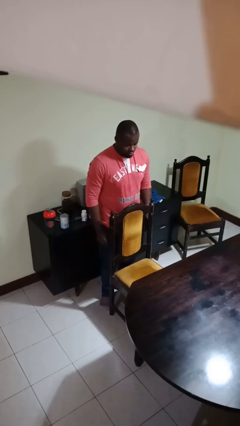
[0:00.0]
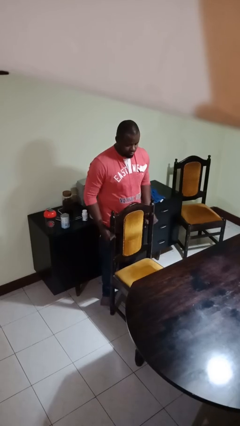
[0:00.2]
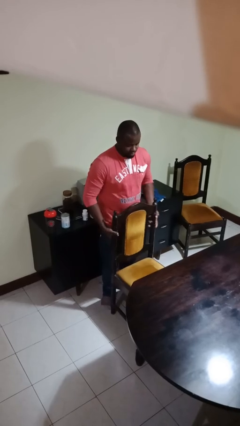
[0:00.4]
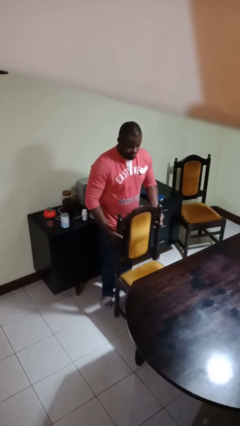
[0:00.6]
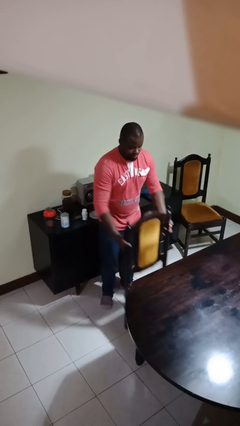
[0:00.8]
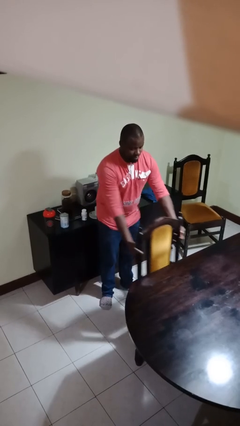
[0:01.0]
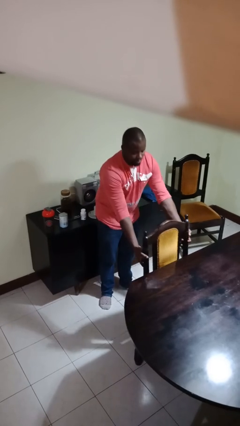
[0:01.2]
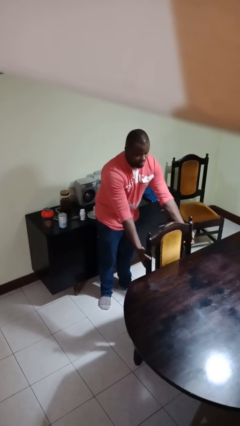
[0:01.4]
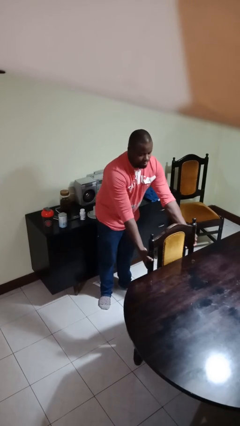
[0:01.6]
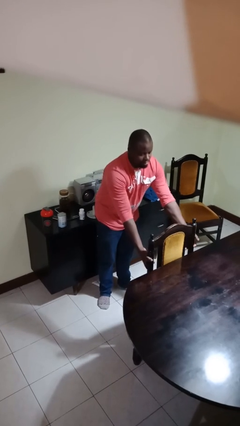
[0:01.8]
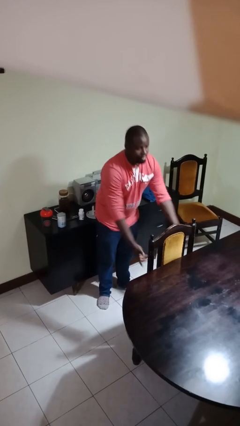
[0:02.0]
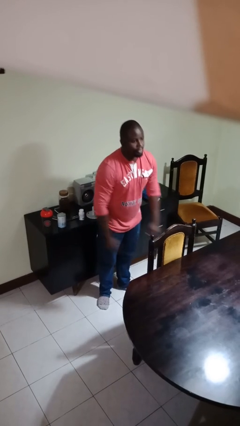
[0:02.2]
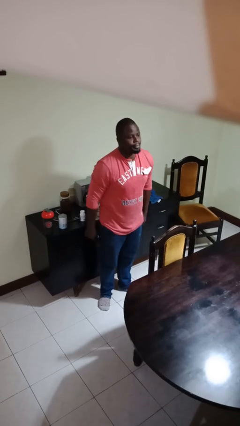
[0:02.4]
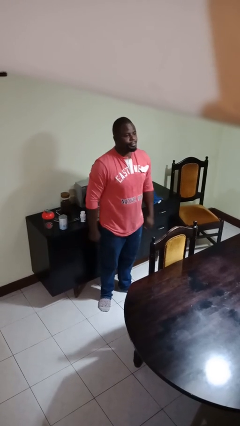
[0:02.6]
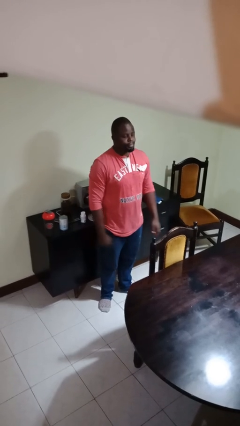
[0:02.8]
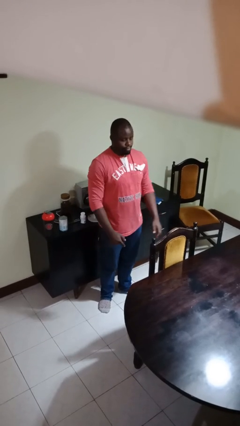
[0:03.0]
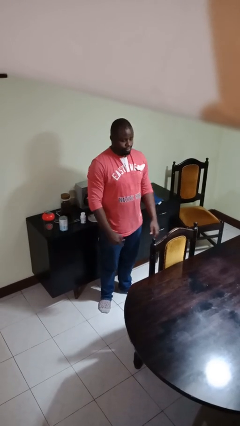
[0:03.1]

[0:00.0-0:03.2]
person pushes in chair

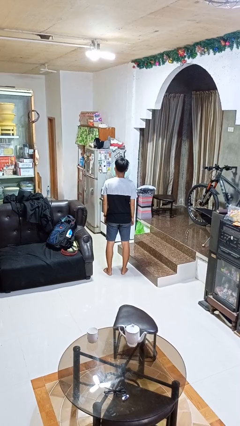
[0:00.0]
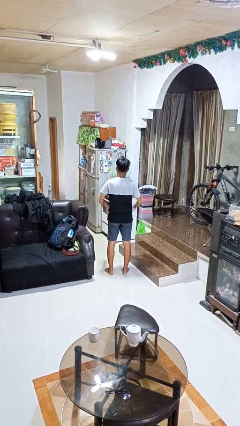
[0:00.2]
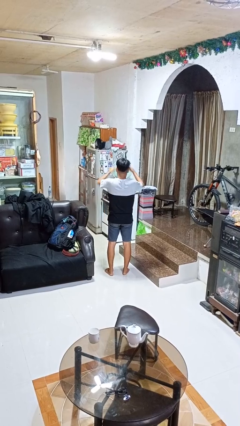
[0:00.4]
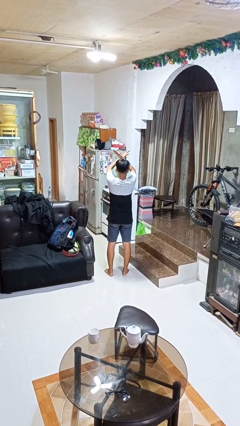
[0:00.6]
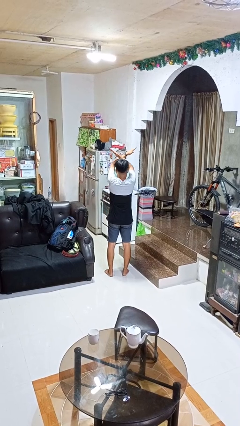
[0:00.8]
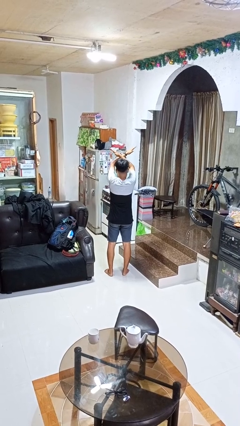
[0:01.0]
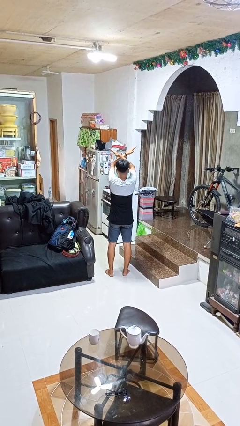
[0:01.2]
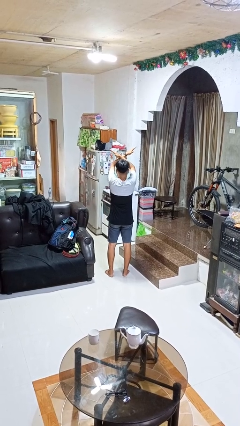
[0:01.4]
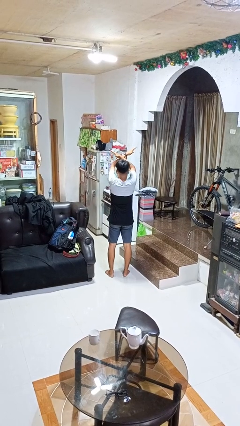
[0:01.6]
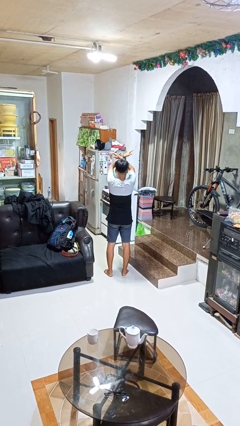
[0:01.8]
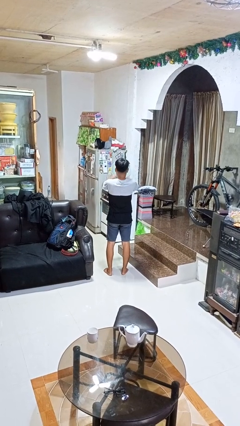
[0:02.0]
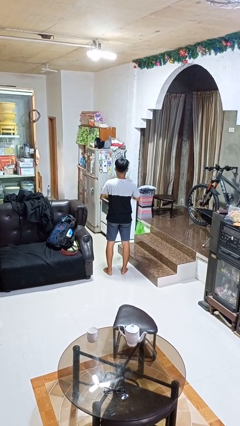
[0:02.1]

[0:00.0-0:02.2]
person gestures arms x

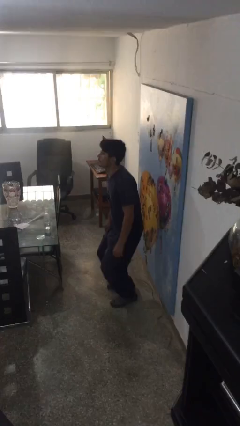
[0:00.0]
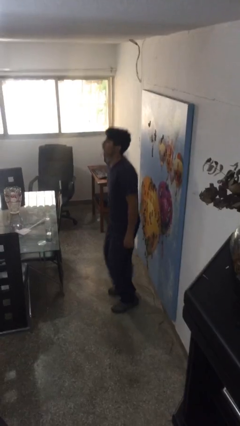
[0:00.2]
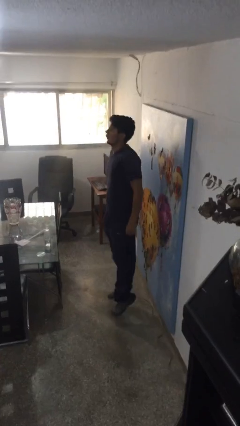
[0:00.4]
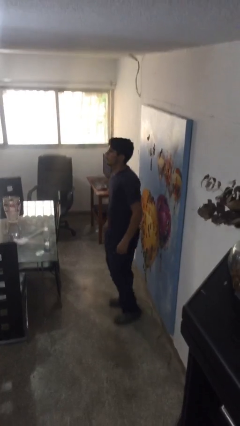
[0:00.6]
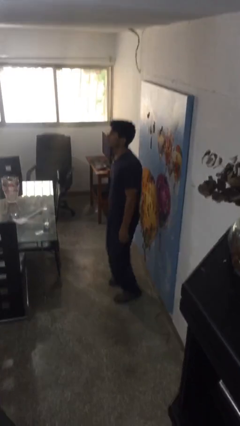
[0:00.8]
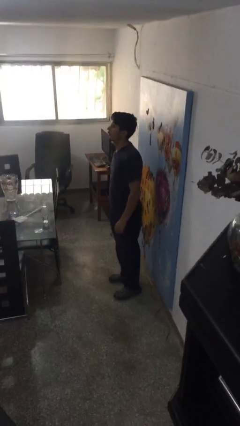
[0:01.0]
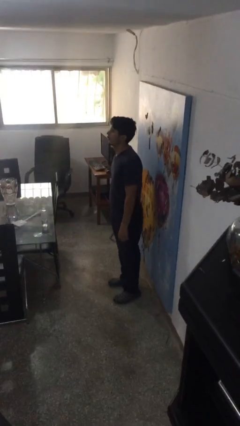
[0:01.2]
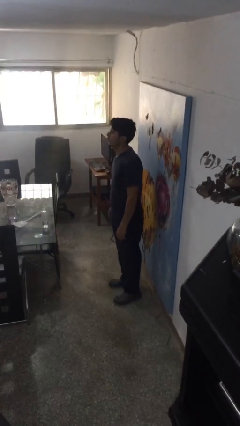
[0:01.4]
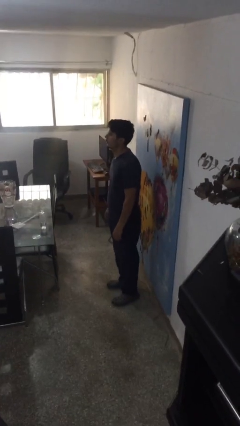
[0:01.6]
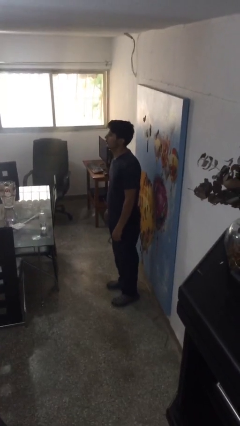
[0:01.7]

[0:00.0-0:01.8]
person jumps

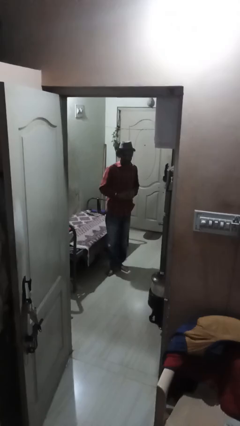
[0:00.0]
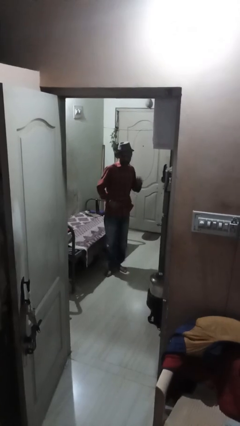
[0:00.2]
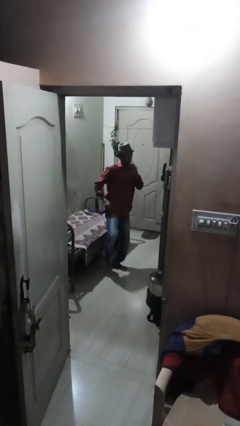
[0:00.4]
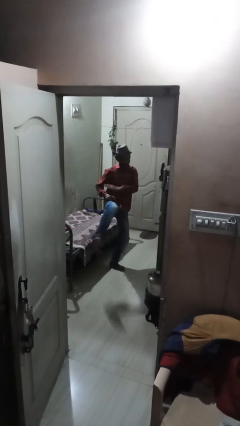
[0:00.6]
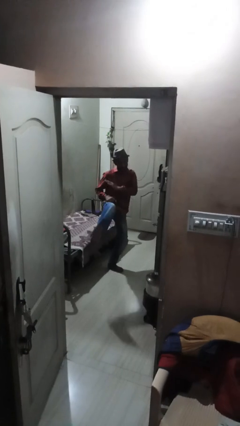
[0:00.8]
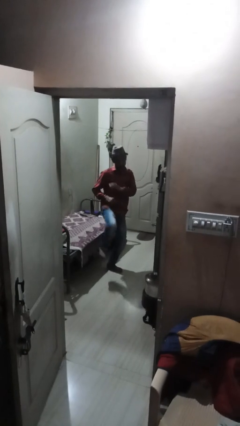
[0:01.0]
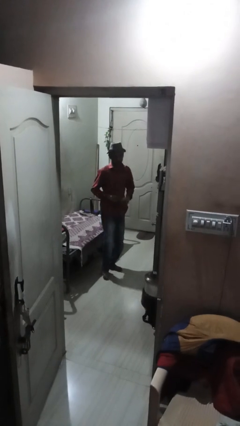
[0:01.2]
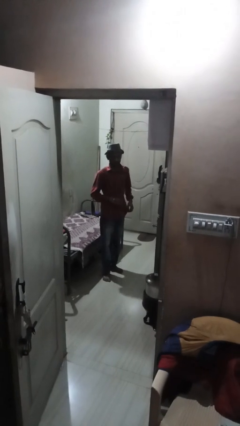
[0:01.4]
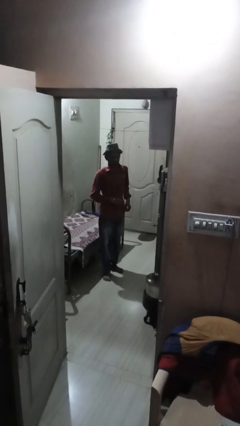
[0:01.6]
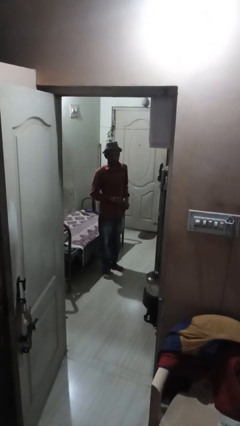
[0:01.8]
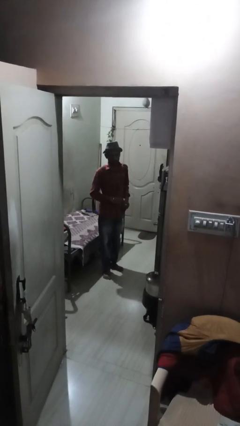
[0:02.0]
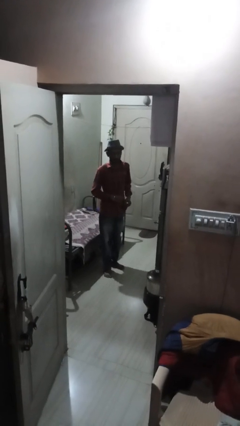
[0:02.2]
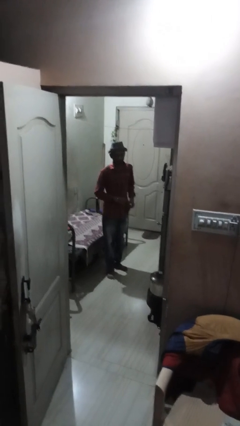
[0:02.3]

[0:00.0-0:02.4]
person karate kicks

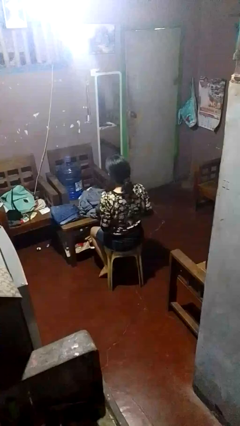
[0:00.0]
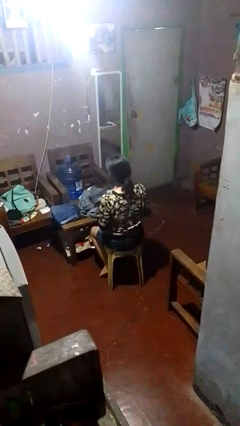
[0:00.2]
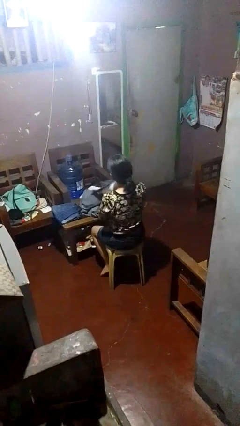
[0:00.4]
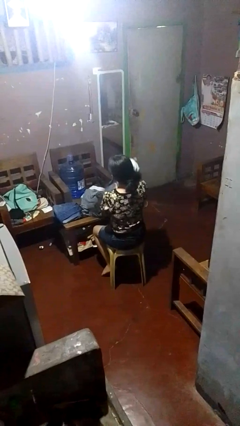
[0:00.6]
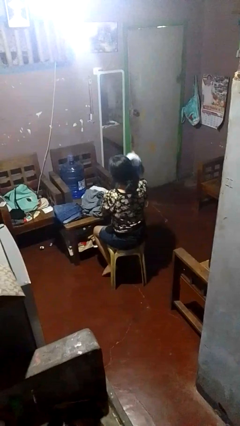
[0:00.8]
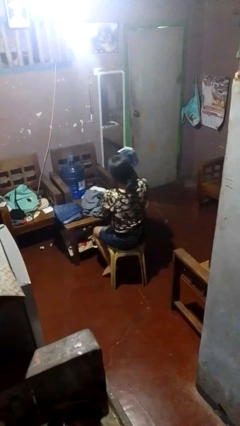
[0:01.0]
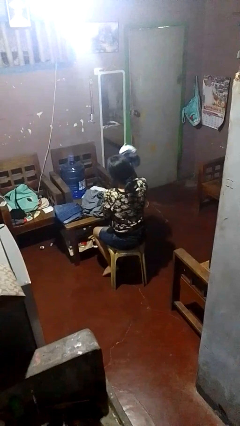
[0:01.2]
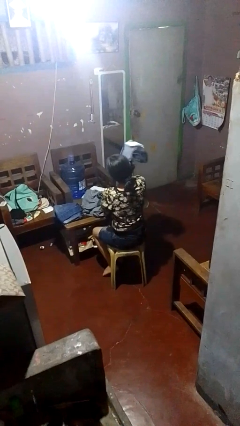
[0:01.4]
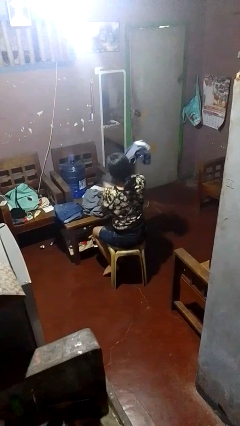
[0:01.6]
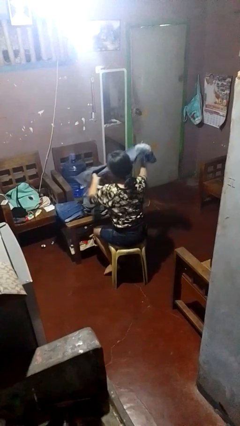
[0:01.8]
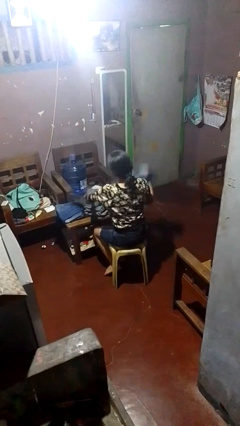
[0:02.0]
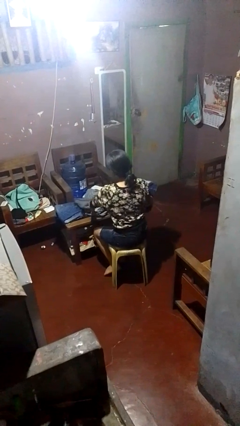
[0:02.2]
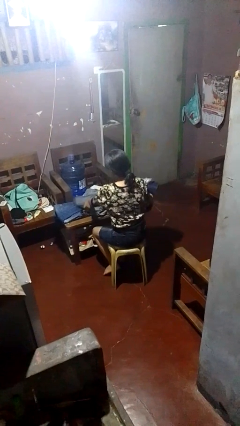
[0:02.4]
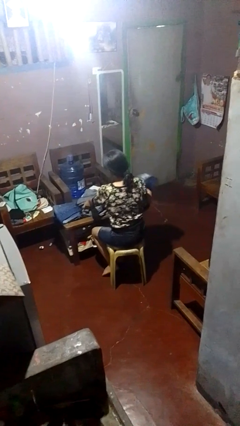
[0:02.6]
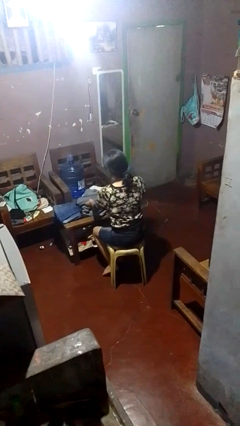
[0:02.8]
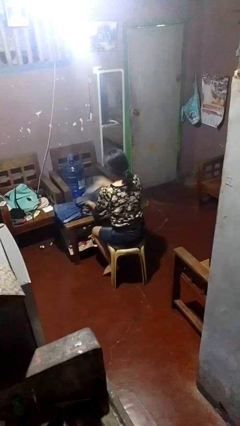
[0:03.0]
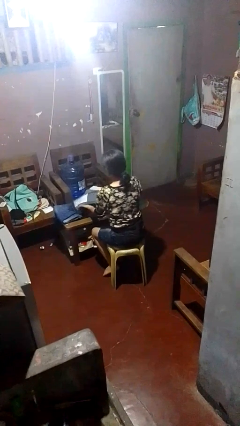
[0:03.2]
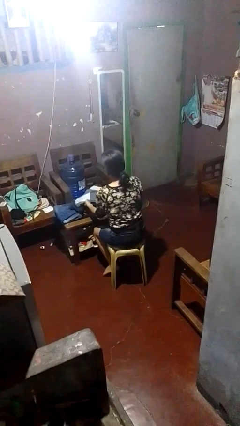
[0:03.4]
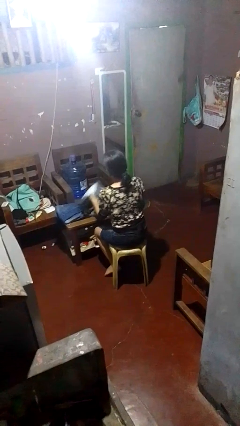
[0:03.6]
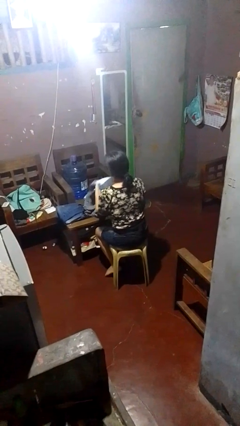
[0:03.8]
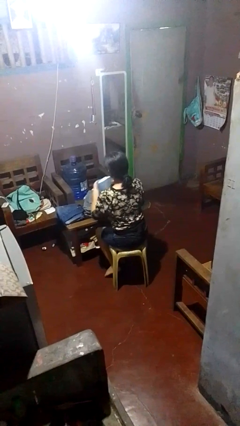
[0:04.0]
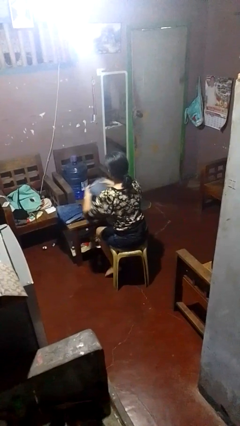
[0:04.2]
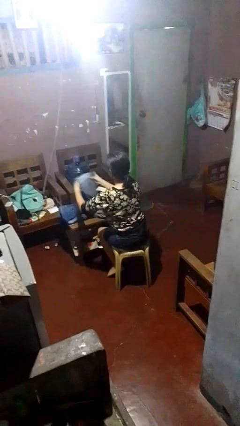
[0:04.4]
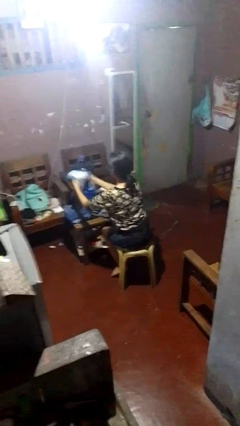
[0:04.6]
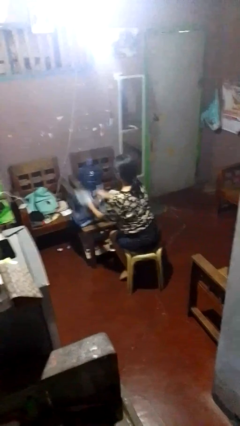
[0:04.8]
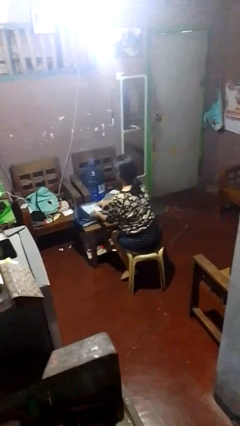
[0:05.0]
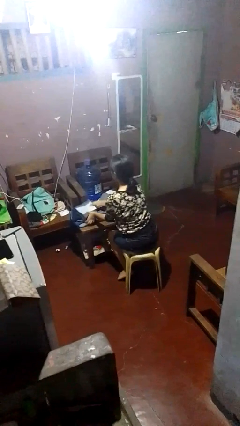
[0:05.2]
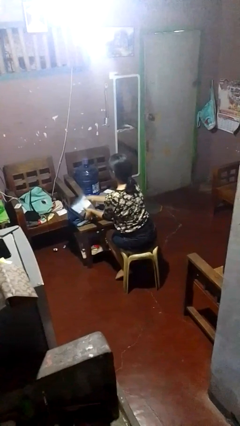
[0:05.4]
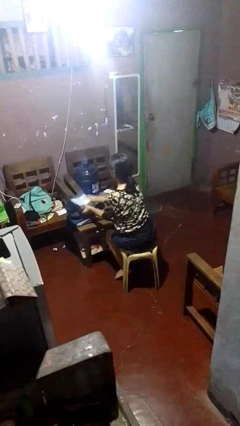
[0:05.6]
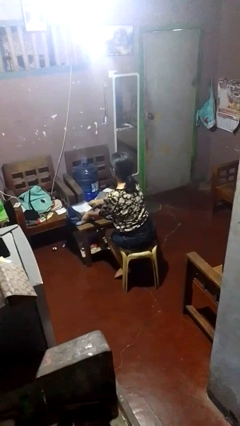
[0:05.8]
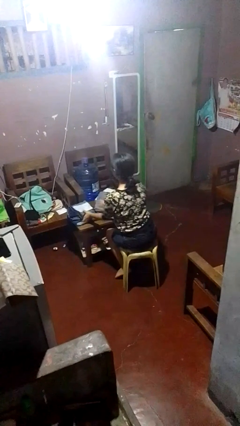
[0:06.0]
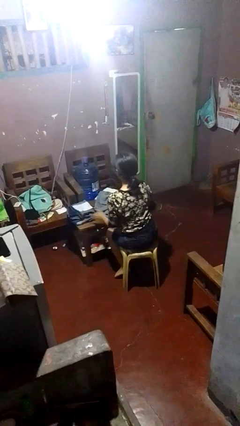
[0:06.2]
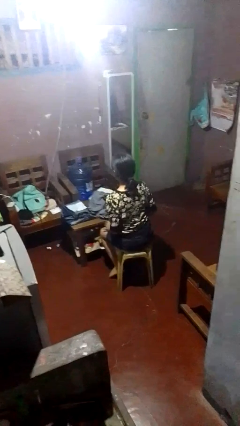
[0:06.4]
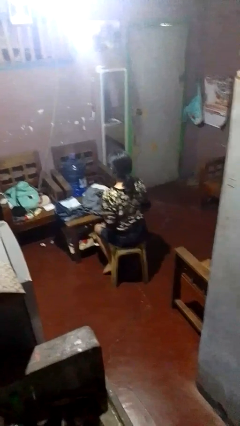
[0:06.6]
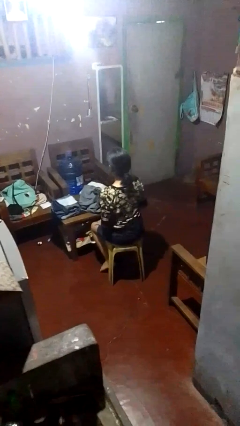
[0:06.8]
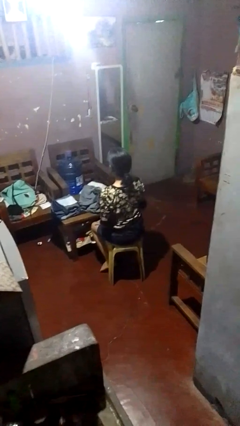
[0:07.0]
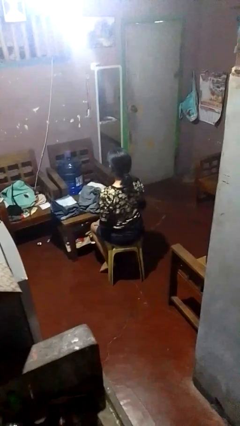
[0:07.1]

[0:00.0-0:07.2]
person folds pants

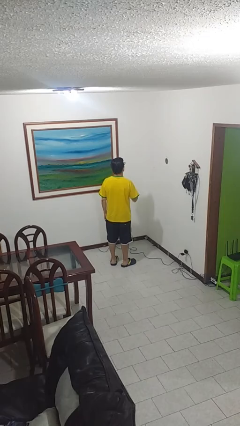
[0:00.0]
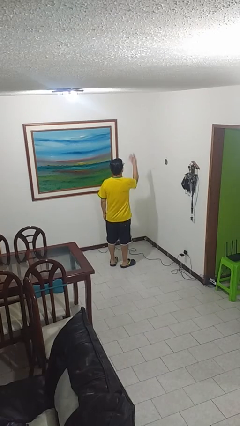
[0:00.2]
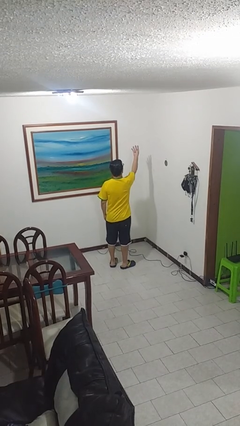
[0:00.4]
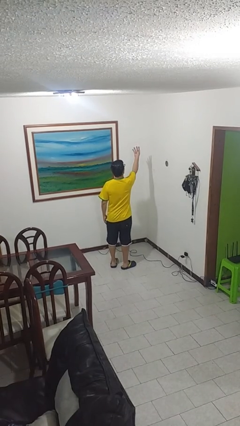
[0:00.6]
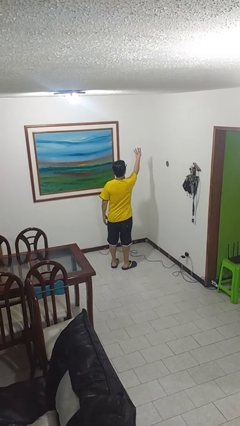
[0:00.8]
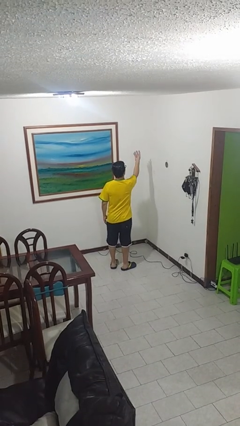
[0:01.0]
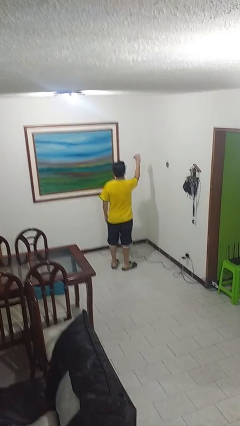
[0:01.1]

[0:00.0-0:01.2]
person gestures number four
